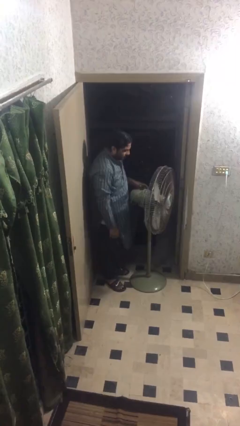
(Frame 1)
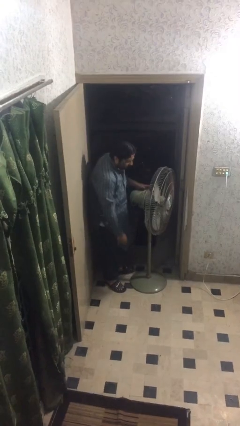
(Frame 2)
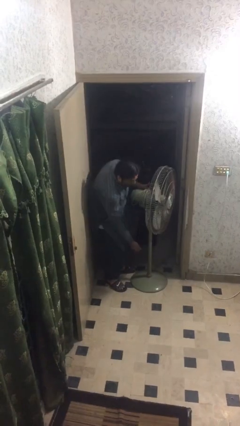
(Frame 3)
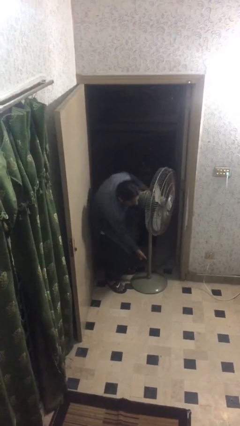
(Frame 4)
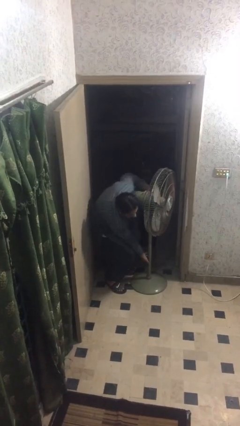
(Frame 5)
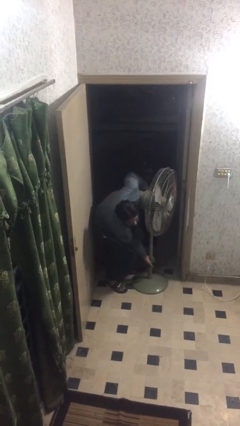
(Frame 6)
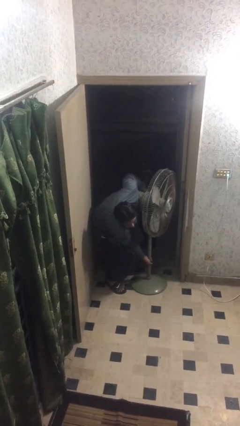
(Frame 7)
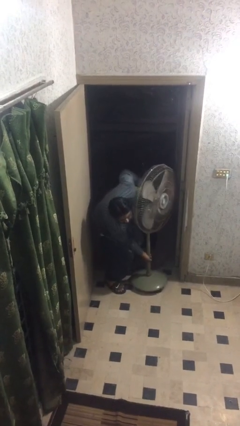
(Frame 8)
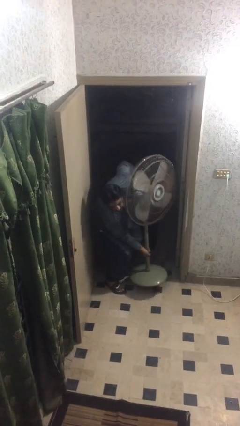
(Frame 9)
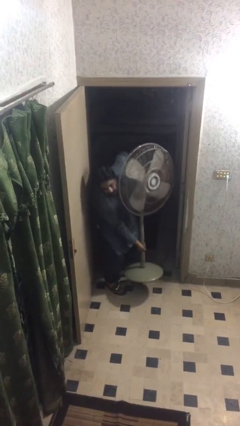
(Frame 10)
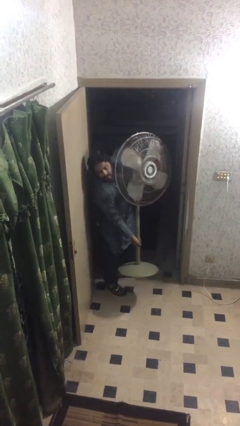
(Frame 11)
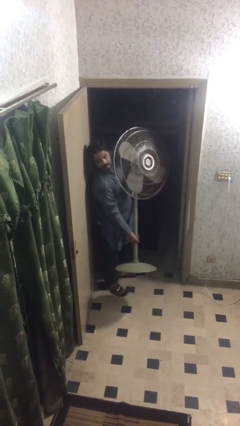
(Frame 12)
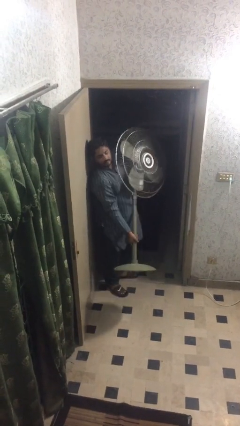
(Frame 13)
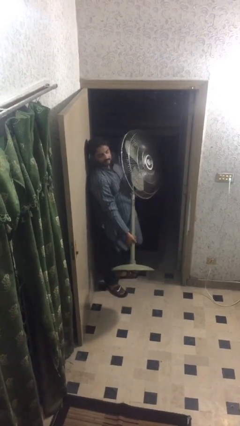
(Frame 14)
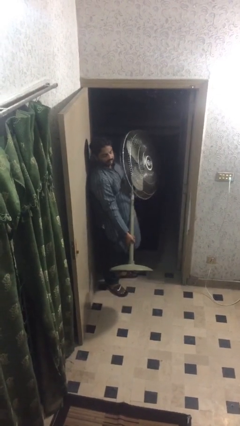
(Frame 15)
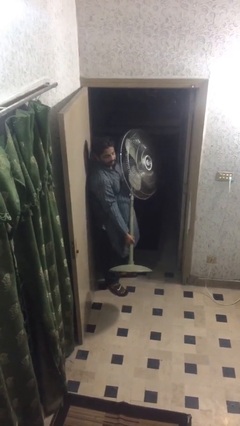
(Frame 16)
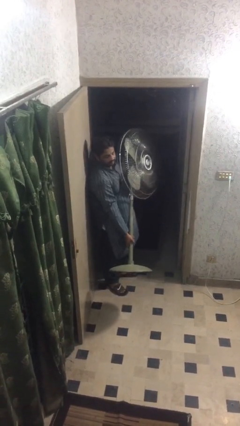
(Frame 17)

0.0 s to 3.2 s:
person picks up object from floor

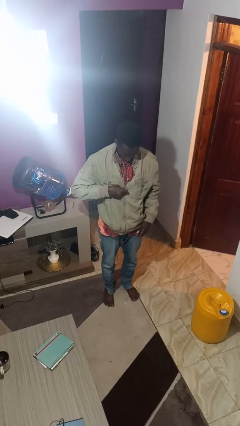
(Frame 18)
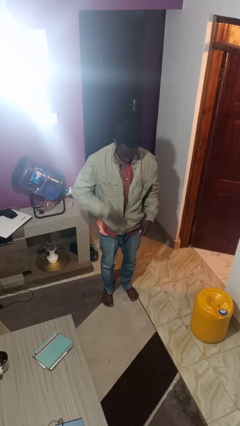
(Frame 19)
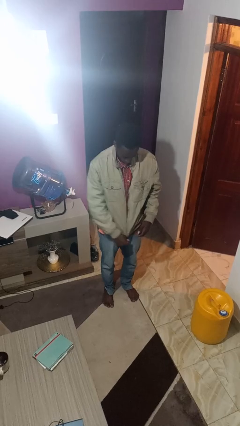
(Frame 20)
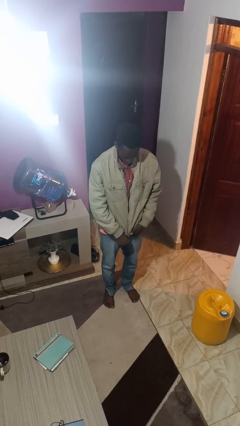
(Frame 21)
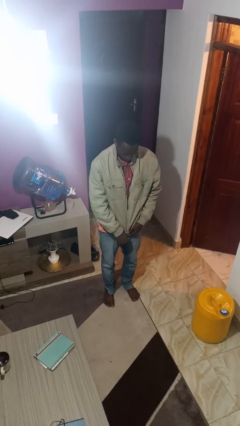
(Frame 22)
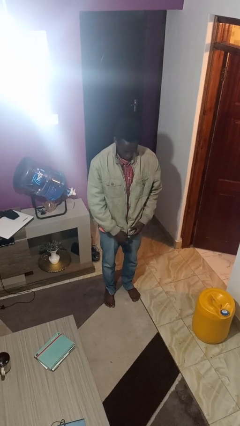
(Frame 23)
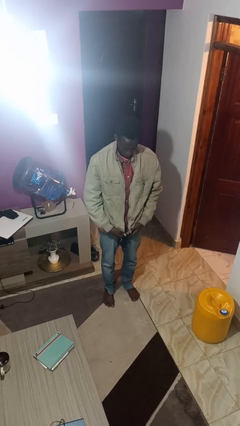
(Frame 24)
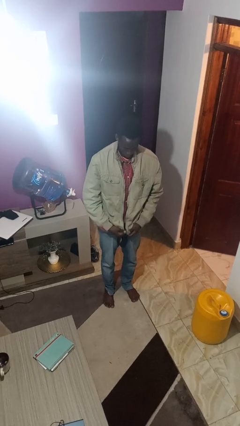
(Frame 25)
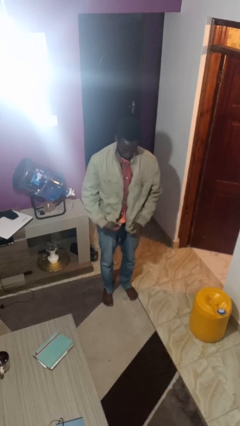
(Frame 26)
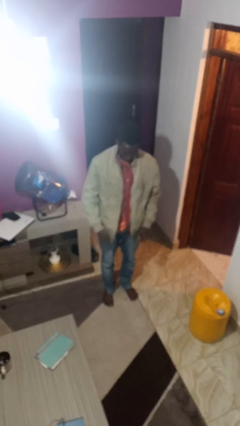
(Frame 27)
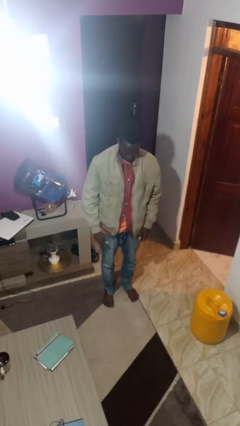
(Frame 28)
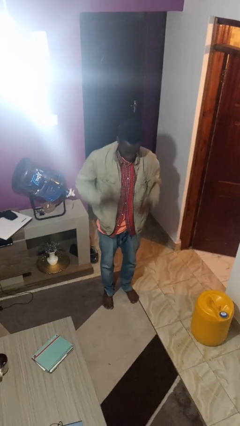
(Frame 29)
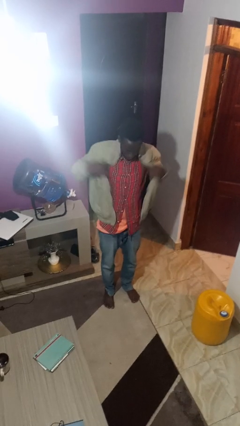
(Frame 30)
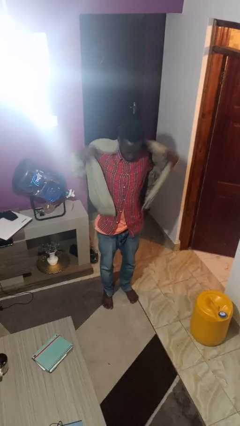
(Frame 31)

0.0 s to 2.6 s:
person unzips jacket

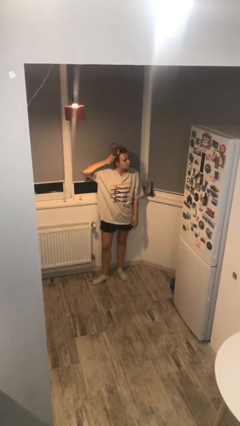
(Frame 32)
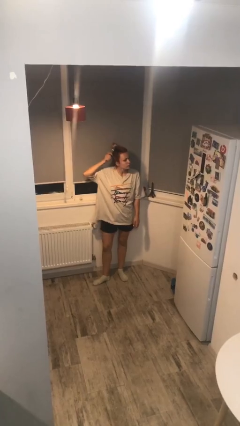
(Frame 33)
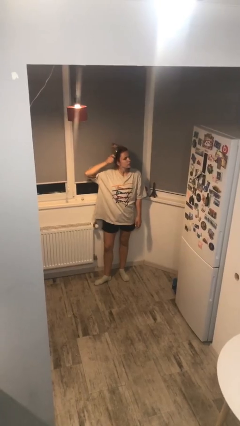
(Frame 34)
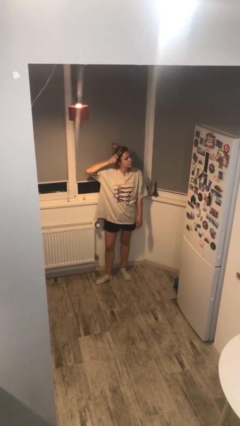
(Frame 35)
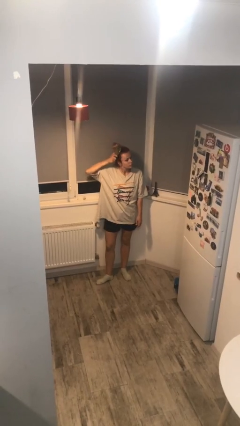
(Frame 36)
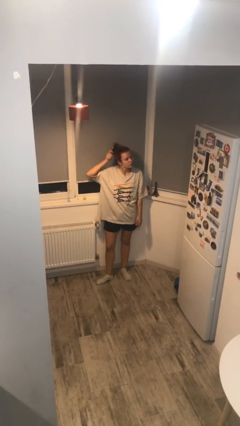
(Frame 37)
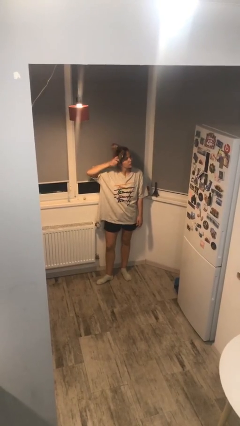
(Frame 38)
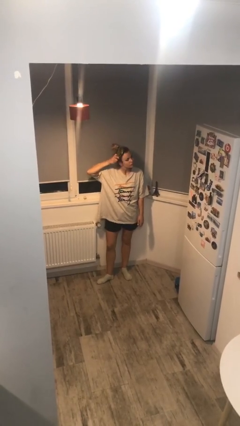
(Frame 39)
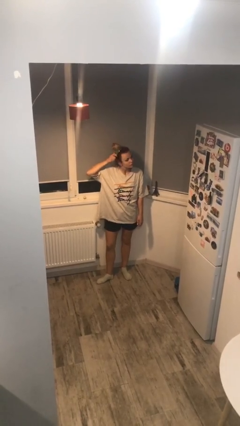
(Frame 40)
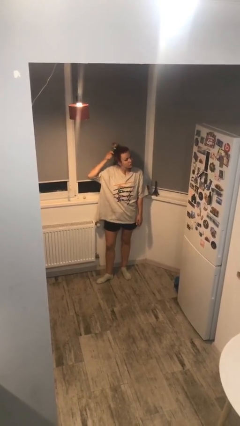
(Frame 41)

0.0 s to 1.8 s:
person brushes hair

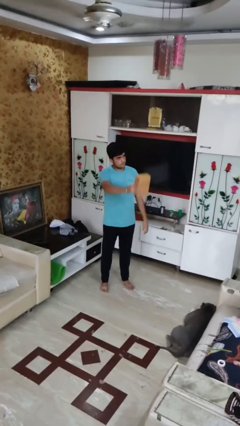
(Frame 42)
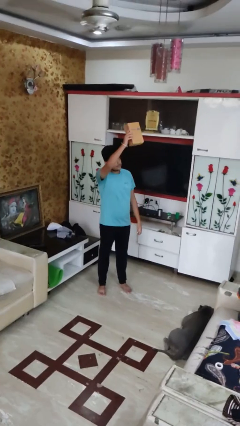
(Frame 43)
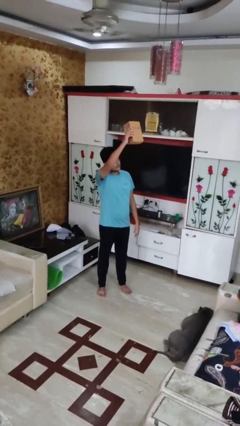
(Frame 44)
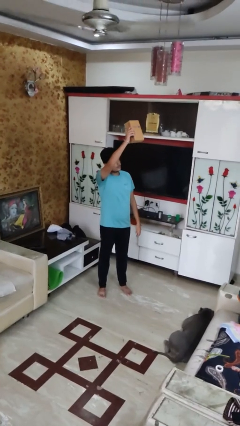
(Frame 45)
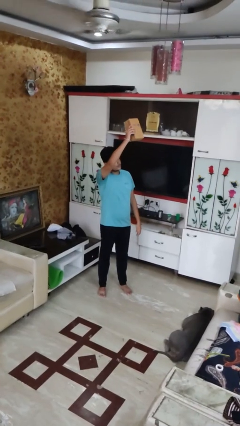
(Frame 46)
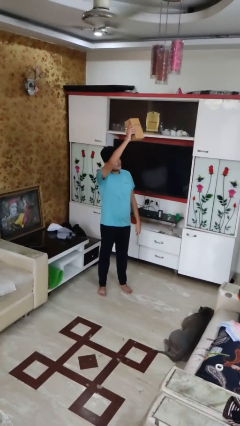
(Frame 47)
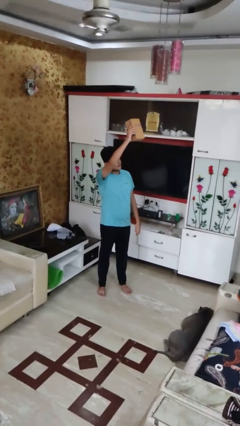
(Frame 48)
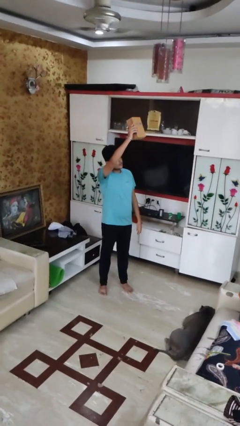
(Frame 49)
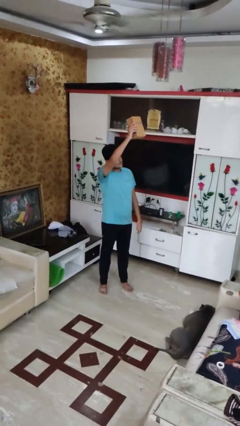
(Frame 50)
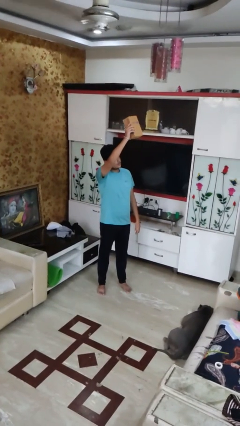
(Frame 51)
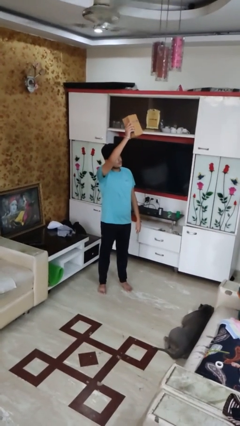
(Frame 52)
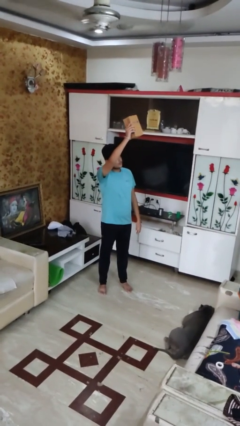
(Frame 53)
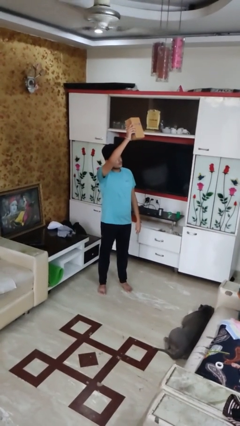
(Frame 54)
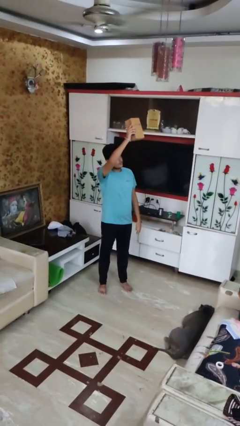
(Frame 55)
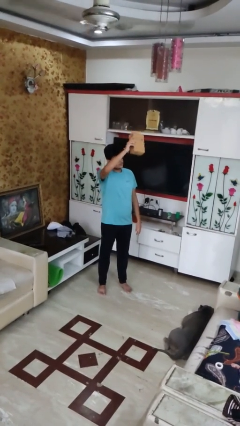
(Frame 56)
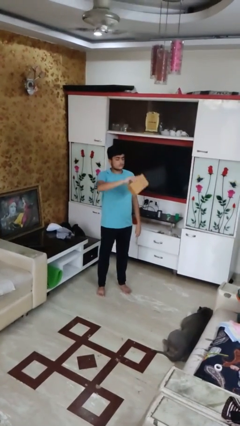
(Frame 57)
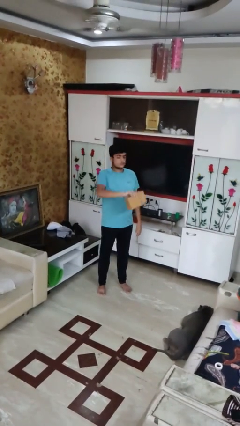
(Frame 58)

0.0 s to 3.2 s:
person holds object above head

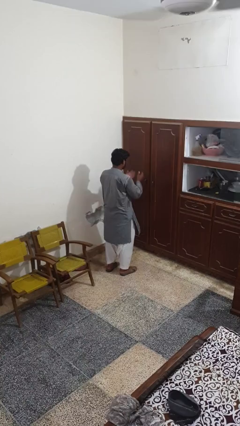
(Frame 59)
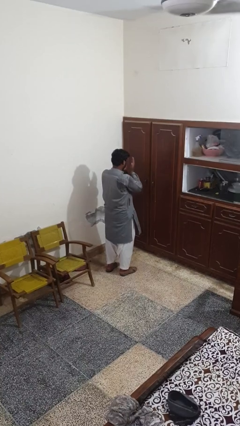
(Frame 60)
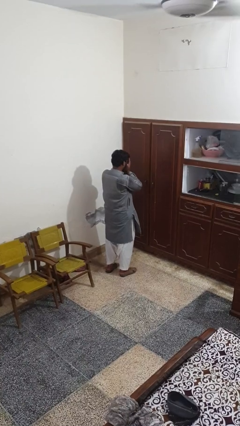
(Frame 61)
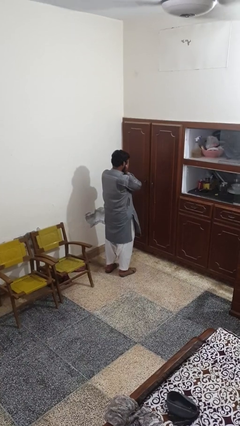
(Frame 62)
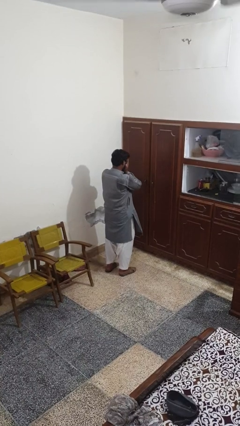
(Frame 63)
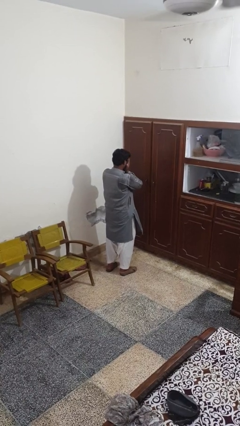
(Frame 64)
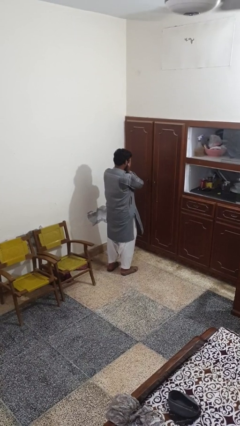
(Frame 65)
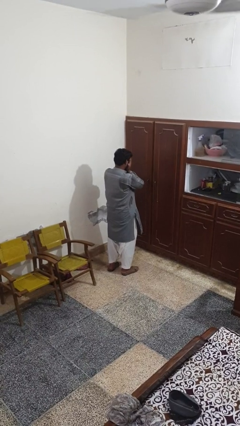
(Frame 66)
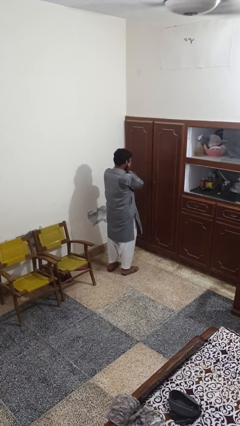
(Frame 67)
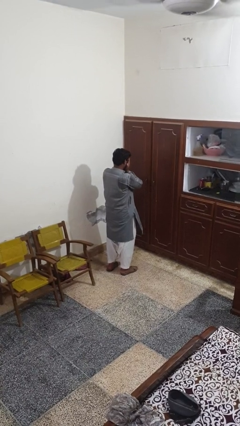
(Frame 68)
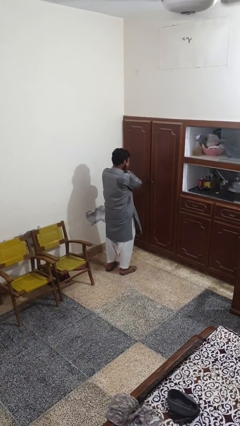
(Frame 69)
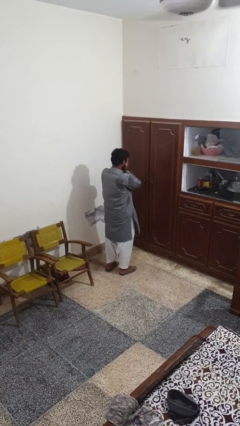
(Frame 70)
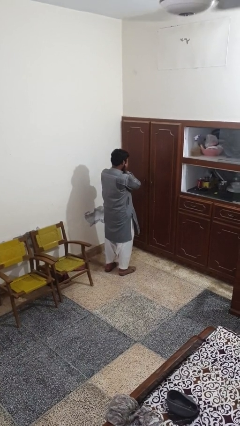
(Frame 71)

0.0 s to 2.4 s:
person covers face with hands

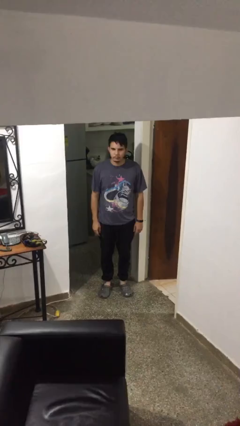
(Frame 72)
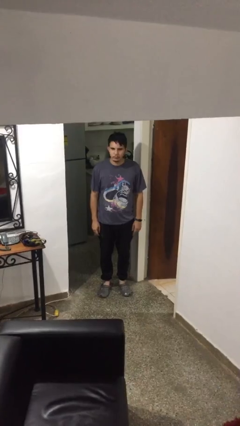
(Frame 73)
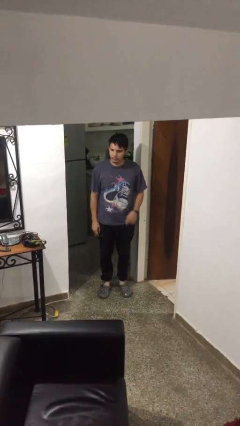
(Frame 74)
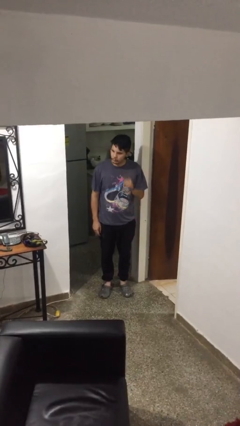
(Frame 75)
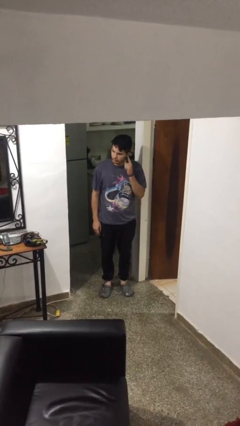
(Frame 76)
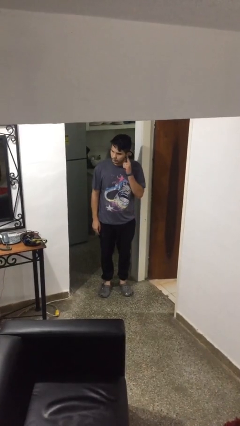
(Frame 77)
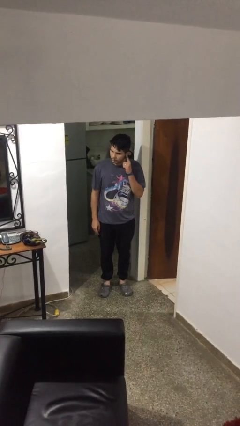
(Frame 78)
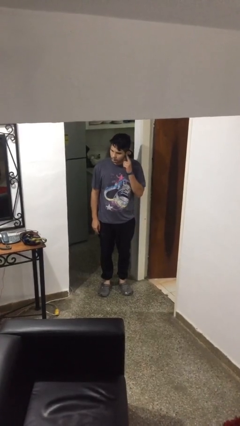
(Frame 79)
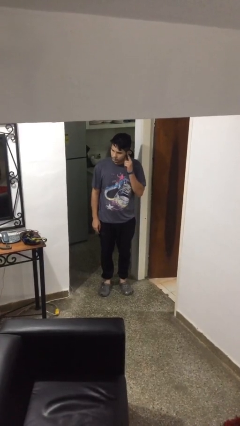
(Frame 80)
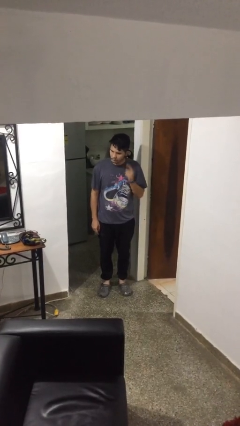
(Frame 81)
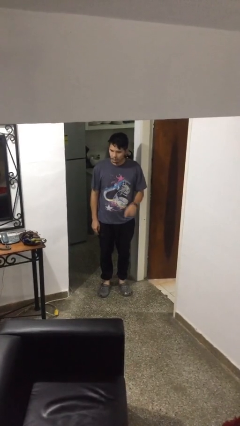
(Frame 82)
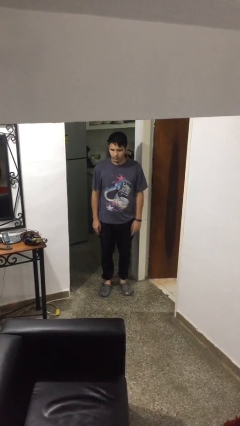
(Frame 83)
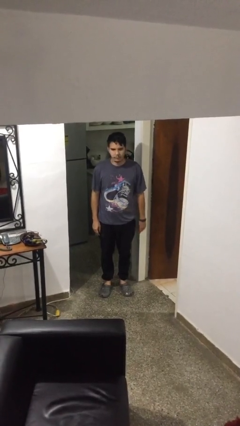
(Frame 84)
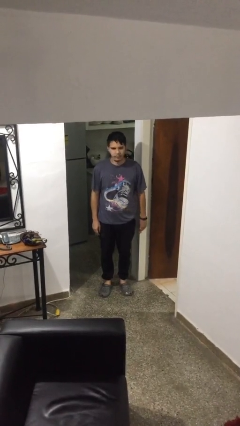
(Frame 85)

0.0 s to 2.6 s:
person gestures listen closely

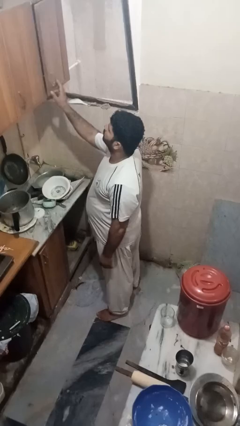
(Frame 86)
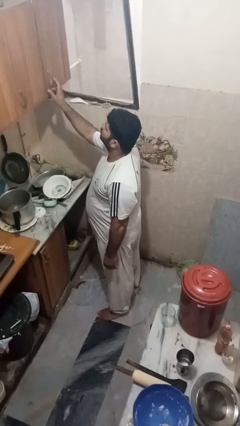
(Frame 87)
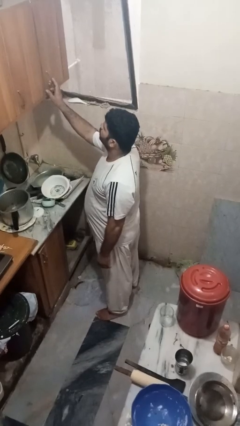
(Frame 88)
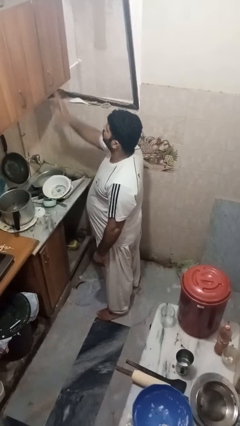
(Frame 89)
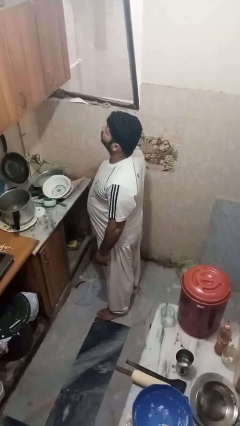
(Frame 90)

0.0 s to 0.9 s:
person closes cabinet

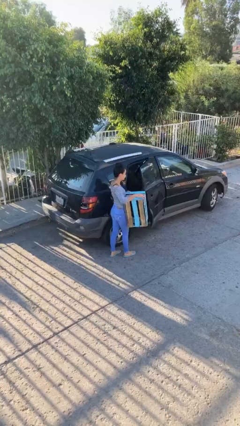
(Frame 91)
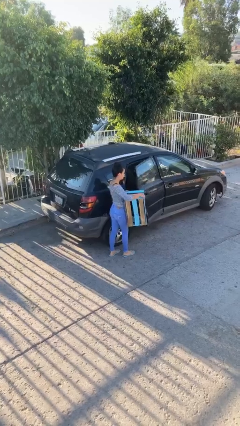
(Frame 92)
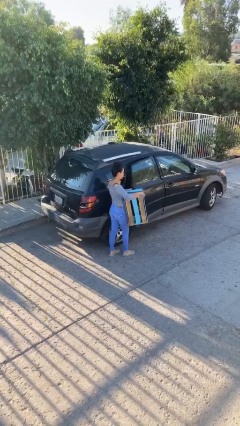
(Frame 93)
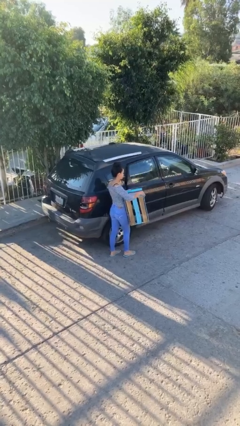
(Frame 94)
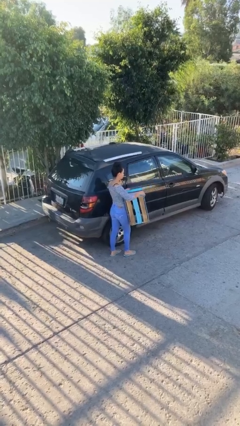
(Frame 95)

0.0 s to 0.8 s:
person closes car door
